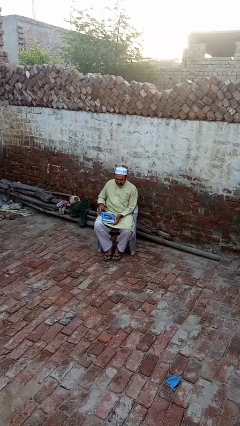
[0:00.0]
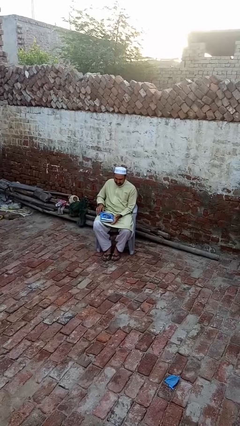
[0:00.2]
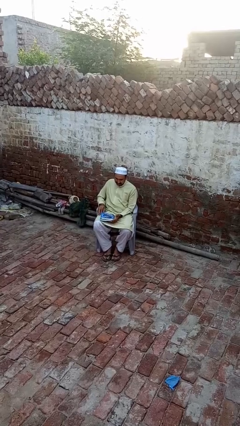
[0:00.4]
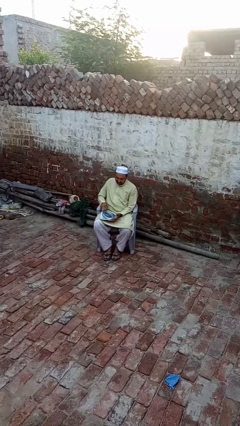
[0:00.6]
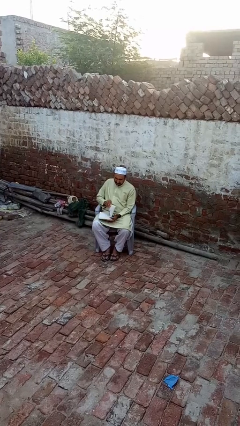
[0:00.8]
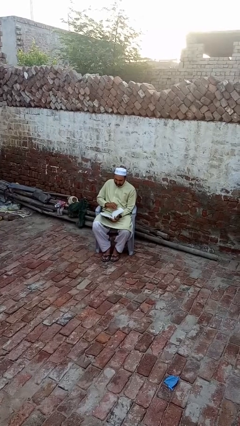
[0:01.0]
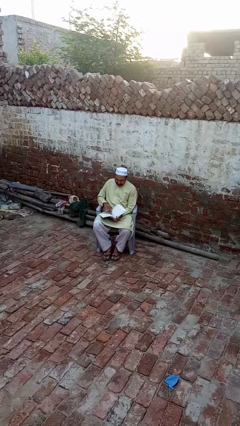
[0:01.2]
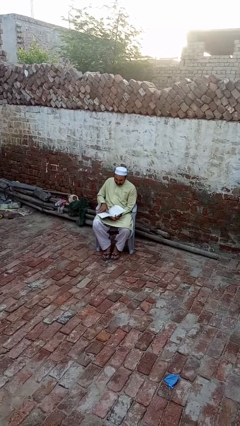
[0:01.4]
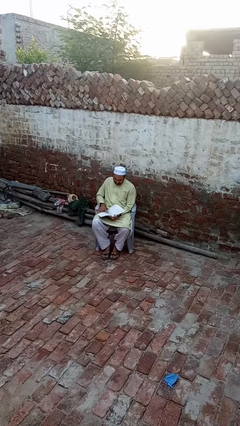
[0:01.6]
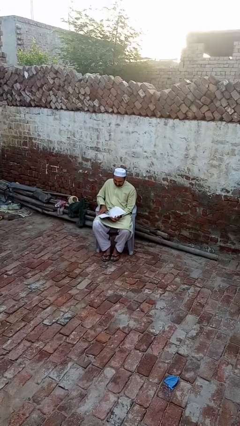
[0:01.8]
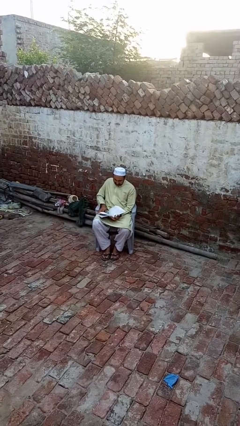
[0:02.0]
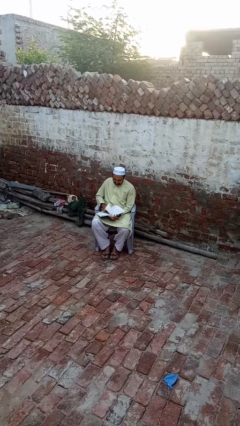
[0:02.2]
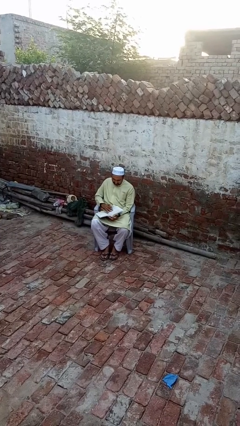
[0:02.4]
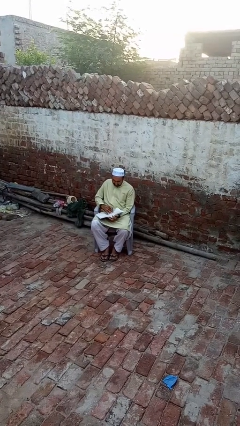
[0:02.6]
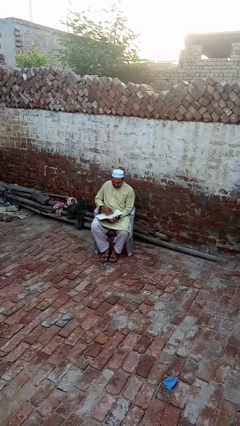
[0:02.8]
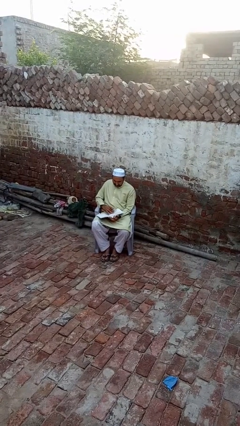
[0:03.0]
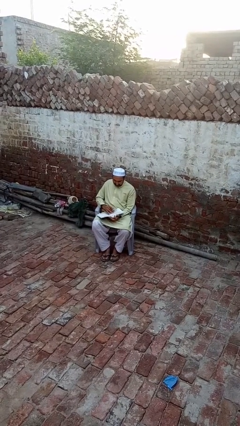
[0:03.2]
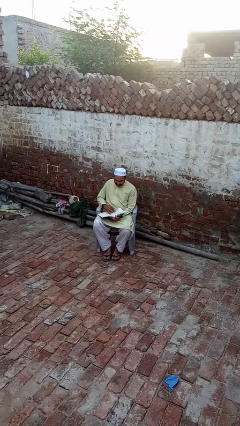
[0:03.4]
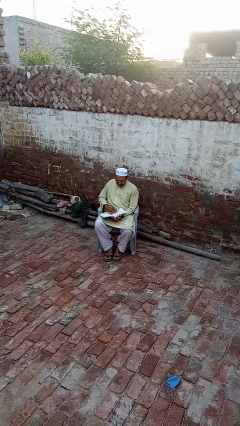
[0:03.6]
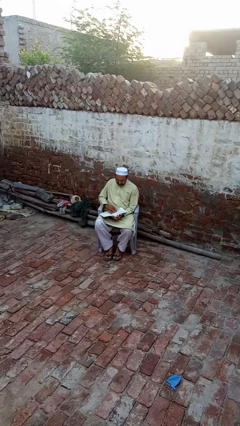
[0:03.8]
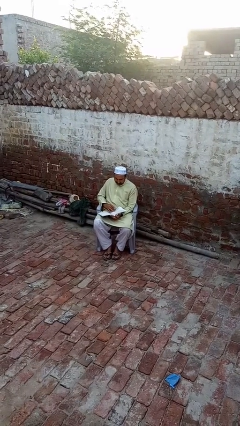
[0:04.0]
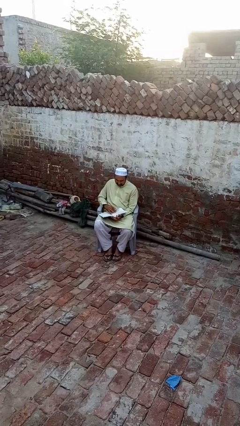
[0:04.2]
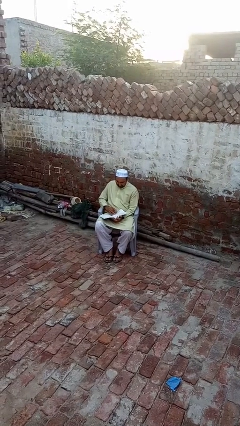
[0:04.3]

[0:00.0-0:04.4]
person reads book

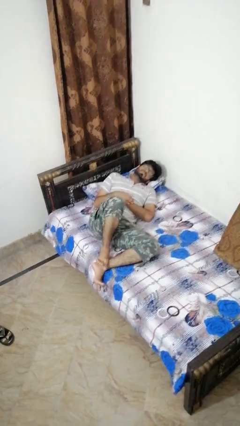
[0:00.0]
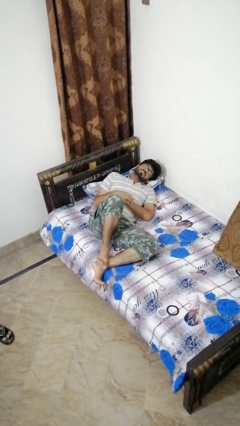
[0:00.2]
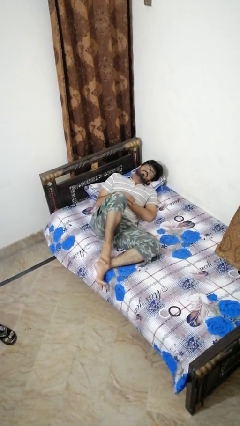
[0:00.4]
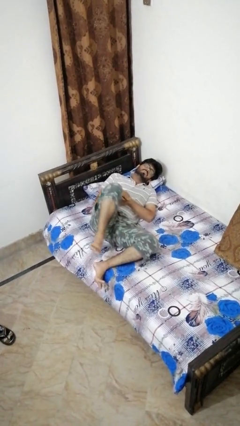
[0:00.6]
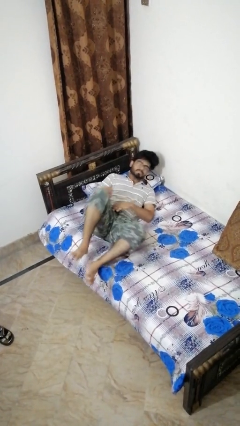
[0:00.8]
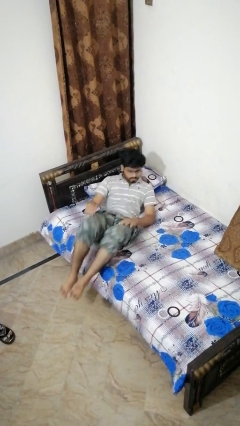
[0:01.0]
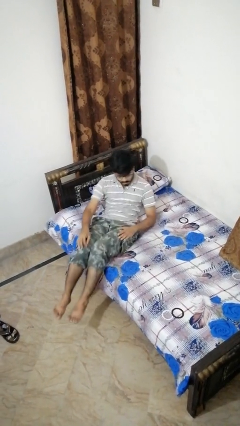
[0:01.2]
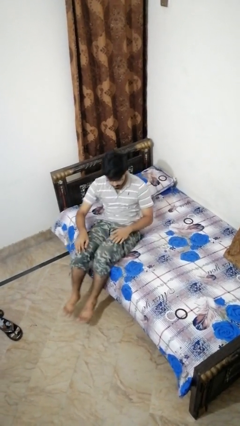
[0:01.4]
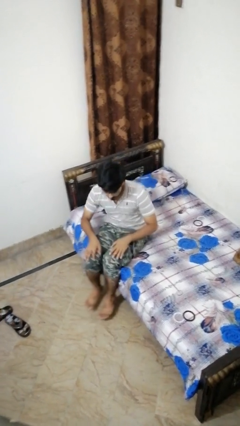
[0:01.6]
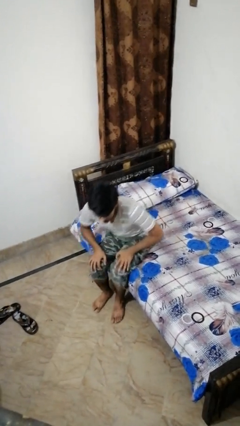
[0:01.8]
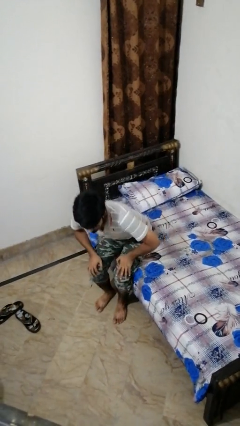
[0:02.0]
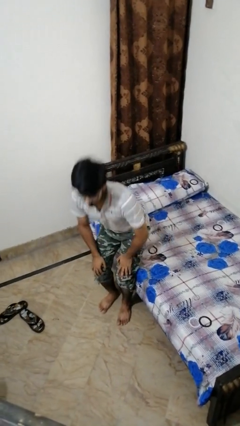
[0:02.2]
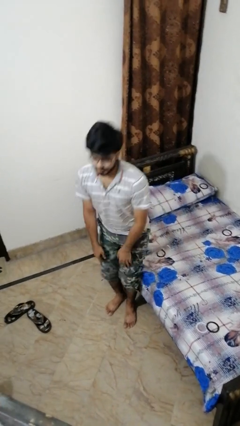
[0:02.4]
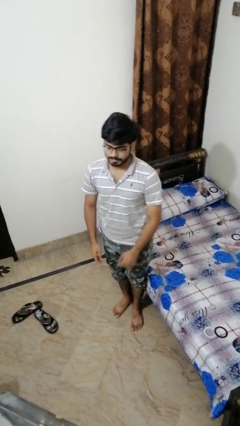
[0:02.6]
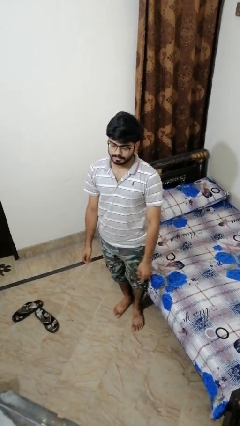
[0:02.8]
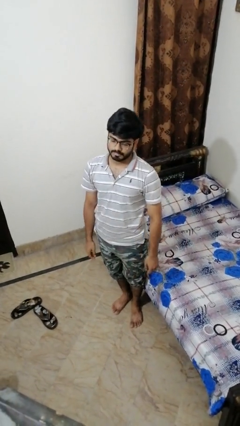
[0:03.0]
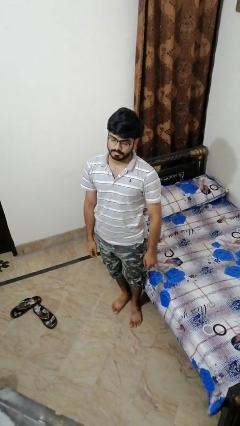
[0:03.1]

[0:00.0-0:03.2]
person stands up

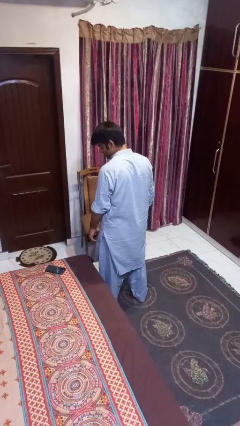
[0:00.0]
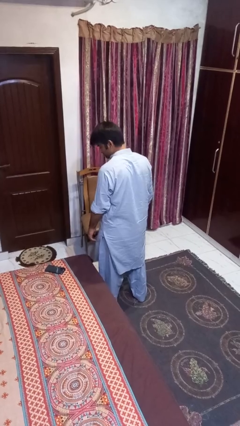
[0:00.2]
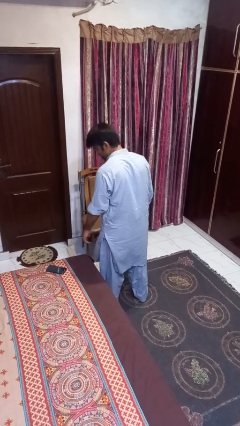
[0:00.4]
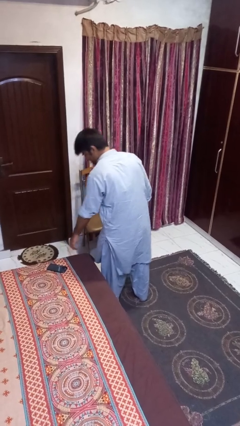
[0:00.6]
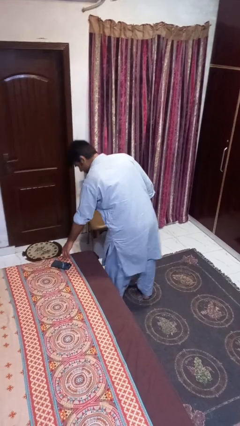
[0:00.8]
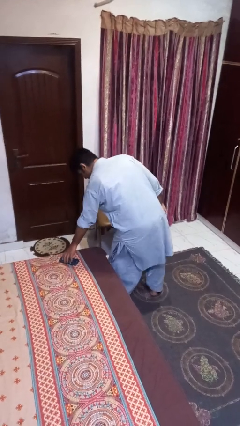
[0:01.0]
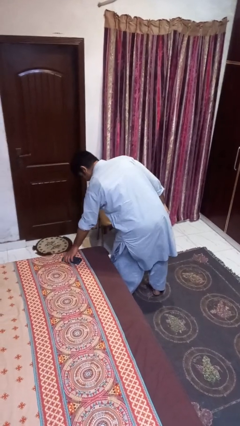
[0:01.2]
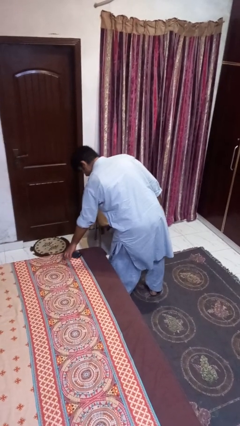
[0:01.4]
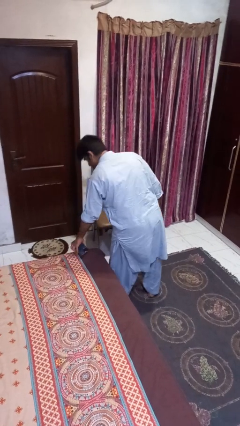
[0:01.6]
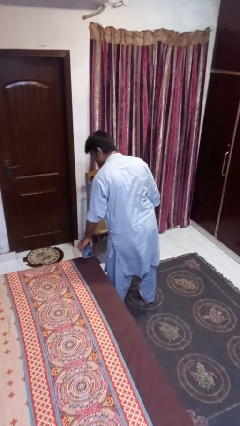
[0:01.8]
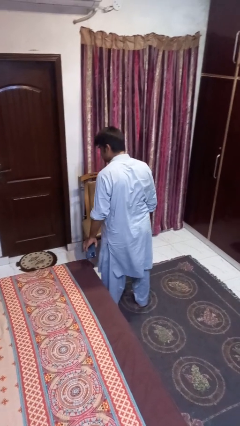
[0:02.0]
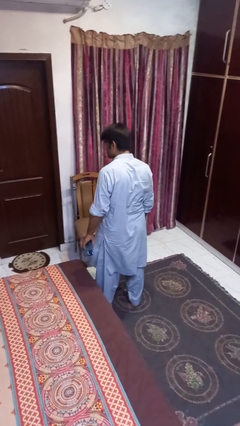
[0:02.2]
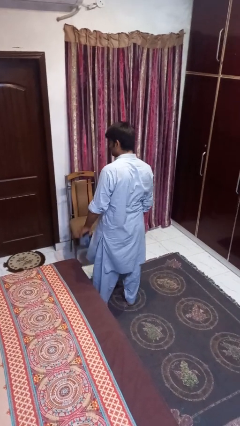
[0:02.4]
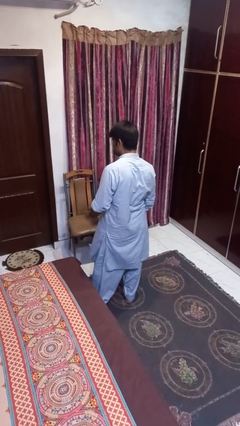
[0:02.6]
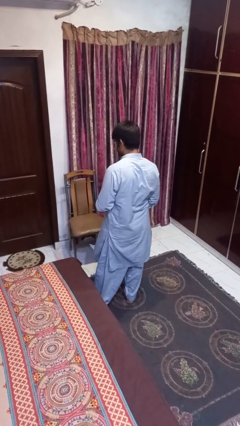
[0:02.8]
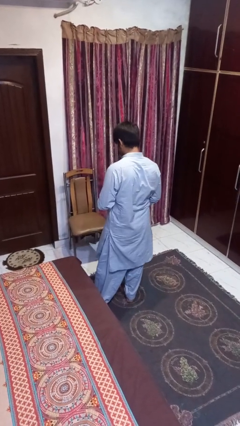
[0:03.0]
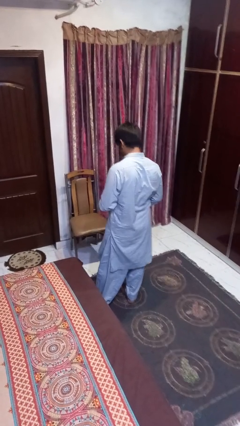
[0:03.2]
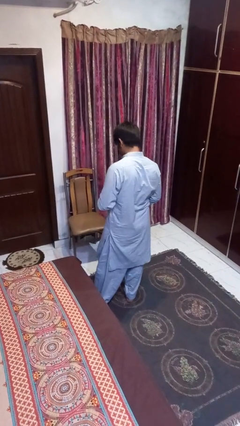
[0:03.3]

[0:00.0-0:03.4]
person picks up object from bed

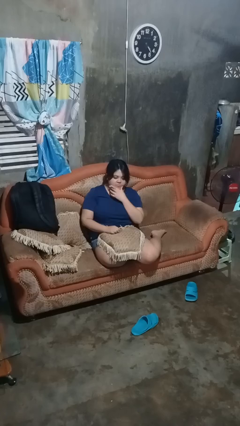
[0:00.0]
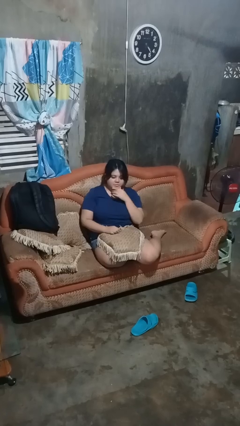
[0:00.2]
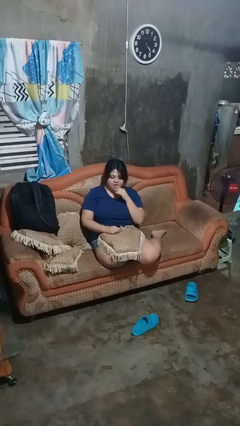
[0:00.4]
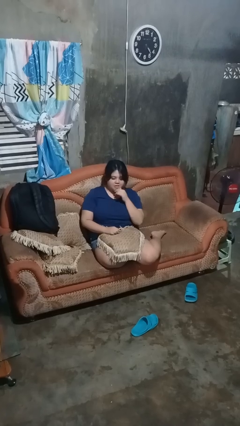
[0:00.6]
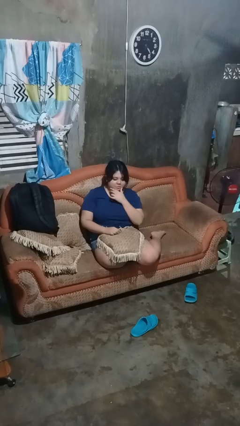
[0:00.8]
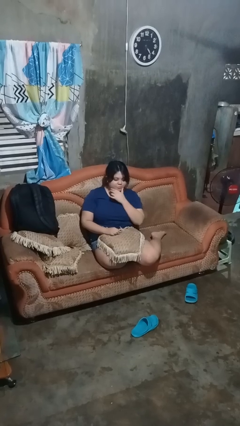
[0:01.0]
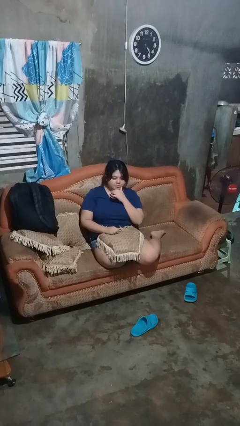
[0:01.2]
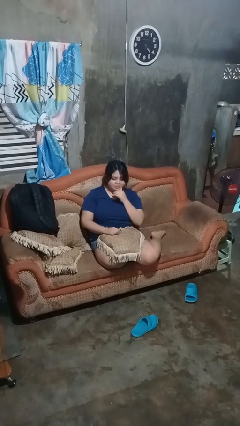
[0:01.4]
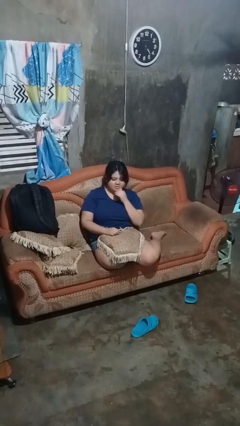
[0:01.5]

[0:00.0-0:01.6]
person strokes chin

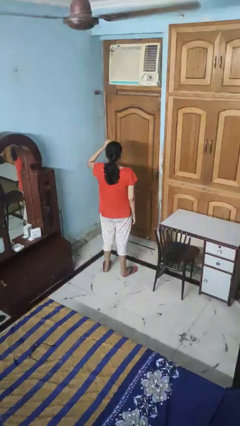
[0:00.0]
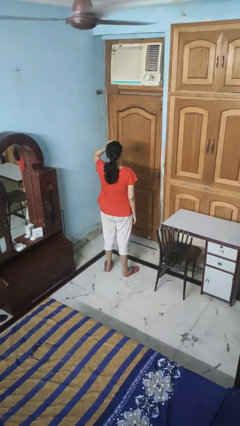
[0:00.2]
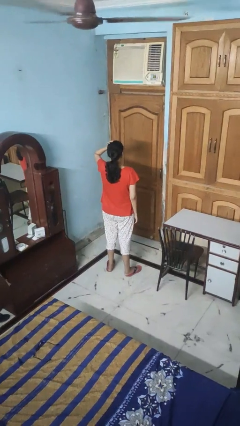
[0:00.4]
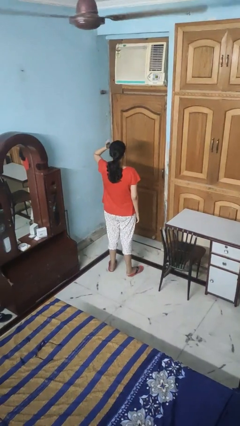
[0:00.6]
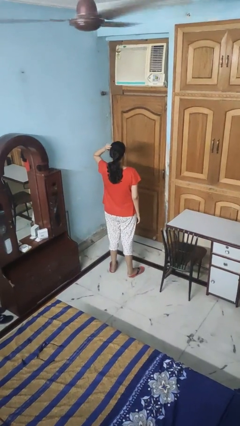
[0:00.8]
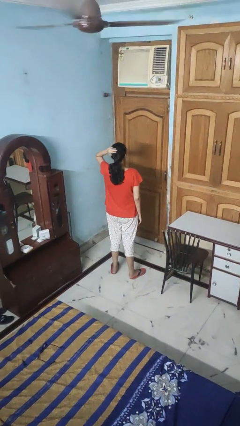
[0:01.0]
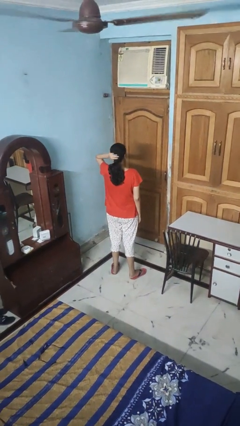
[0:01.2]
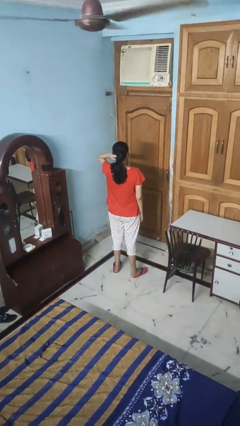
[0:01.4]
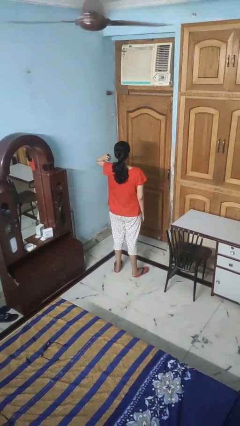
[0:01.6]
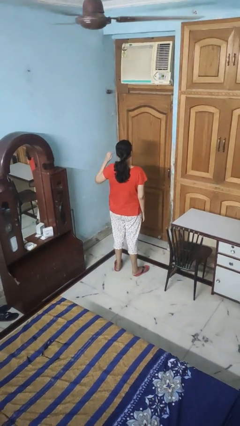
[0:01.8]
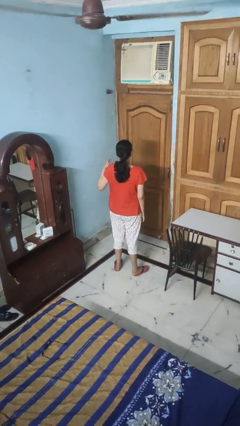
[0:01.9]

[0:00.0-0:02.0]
person pats head

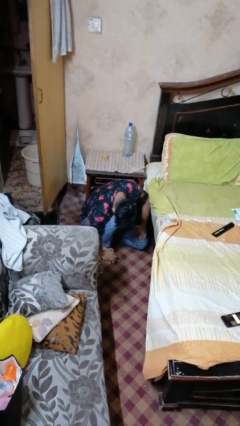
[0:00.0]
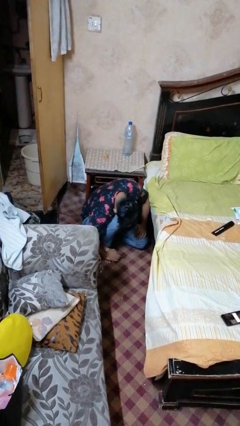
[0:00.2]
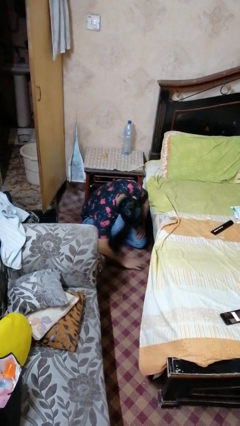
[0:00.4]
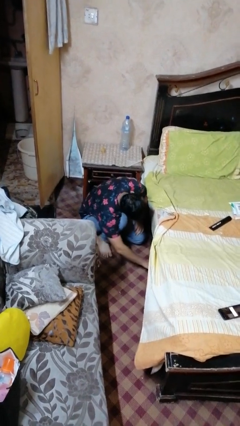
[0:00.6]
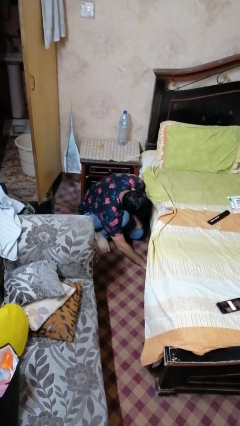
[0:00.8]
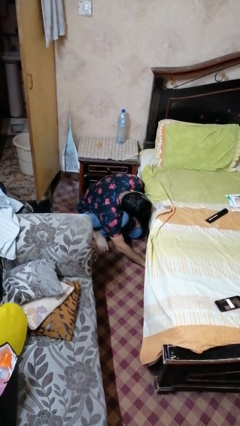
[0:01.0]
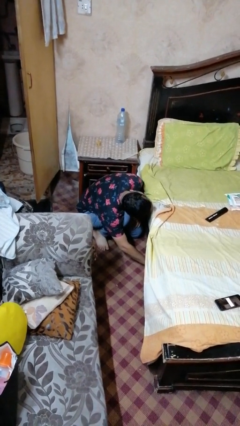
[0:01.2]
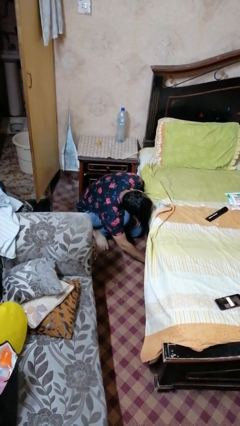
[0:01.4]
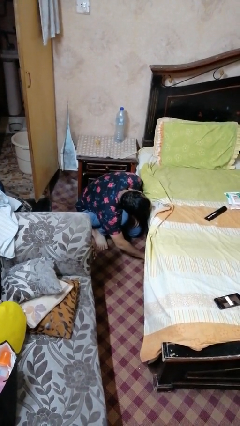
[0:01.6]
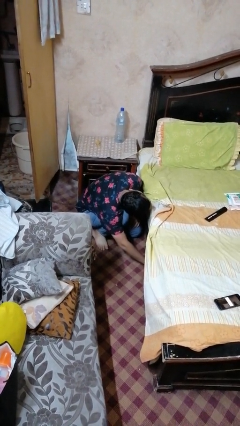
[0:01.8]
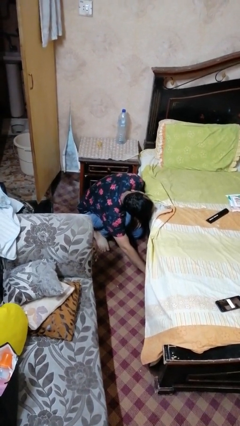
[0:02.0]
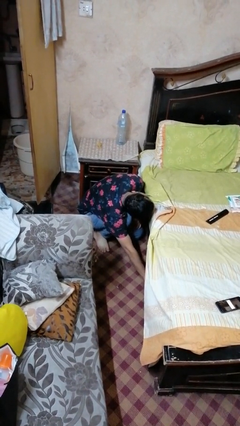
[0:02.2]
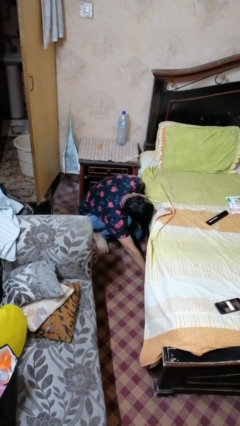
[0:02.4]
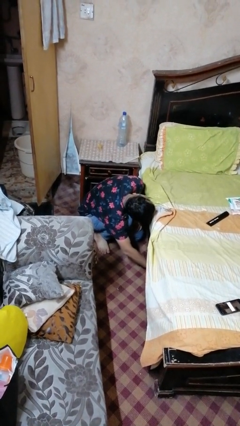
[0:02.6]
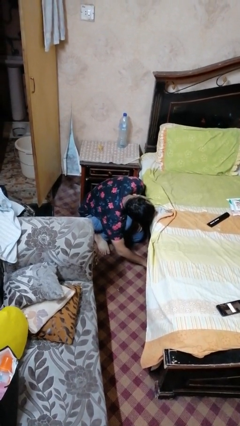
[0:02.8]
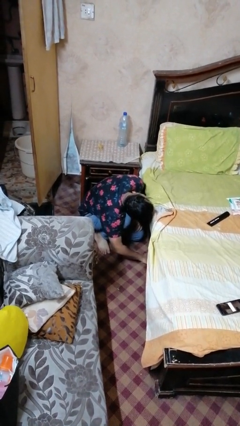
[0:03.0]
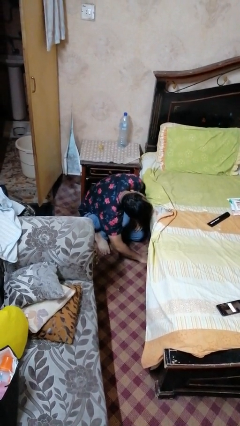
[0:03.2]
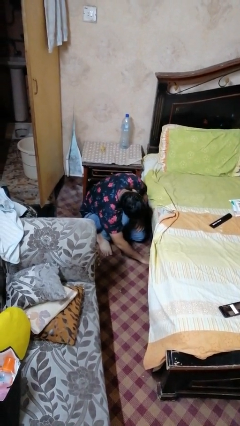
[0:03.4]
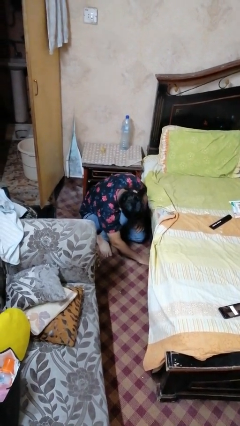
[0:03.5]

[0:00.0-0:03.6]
person searches under bed
